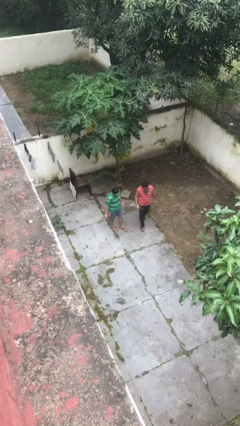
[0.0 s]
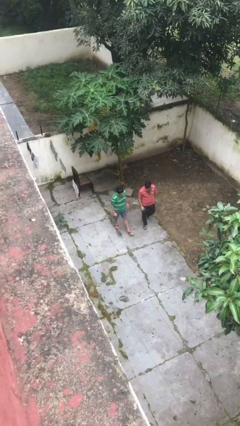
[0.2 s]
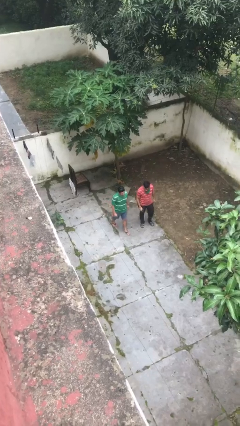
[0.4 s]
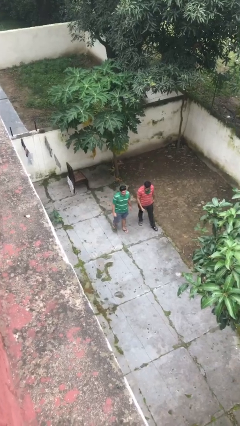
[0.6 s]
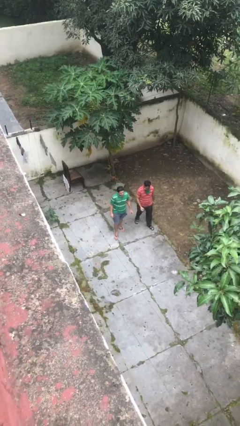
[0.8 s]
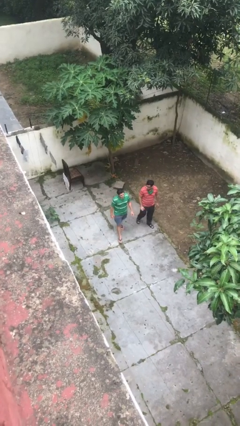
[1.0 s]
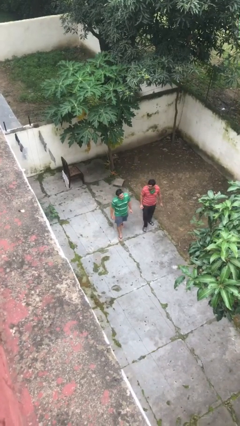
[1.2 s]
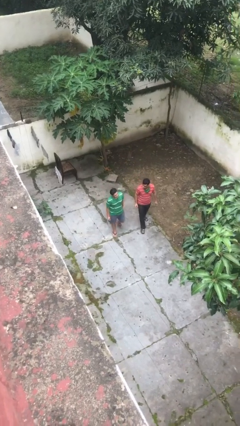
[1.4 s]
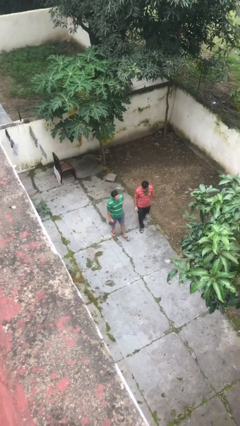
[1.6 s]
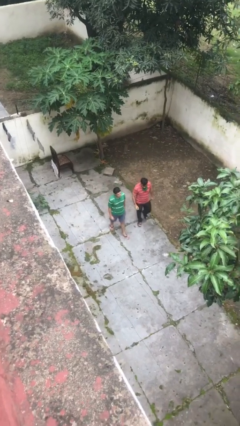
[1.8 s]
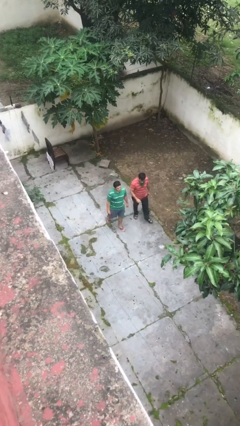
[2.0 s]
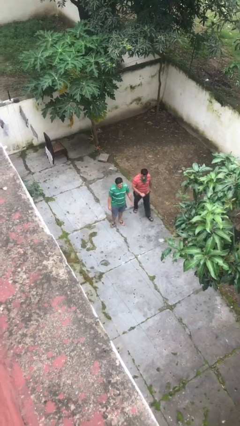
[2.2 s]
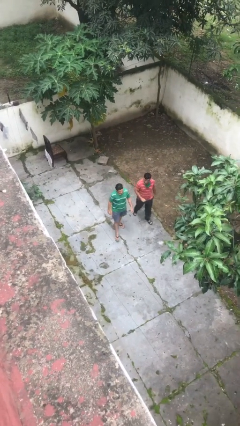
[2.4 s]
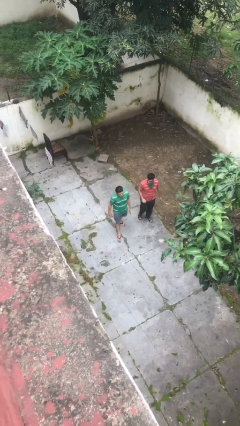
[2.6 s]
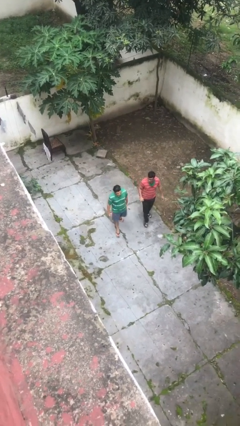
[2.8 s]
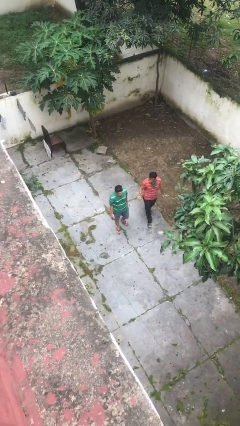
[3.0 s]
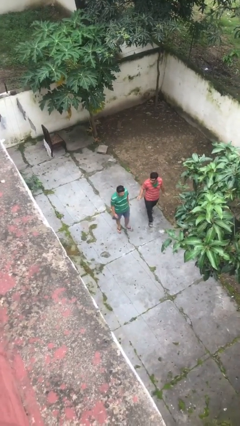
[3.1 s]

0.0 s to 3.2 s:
person talks to person

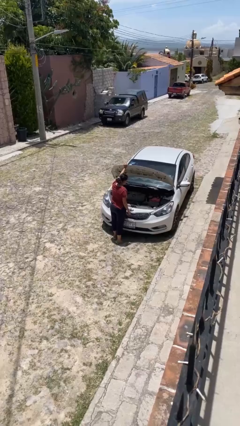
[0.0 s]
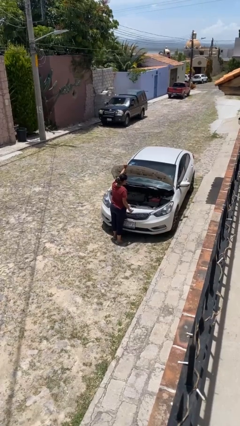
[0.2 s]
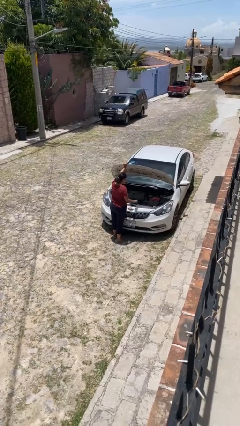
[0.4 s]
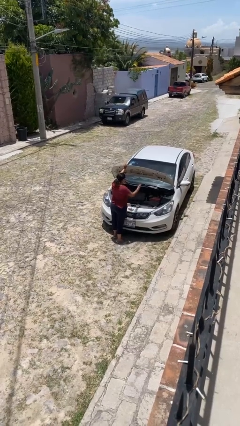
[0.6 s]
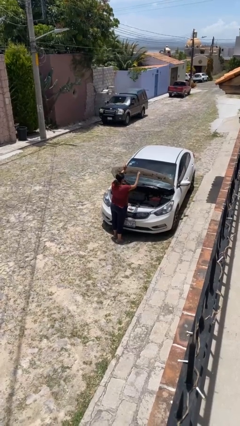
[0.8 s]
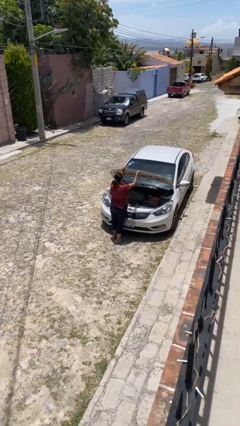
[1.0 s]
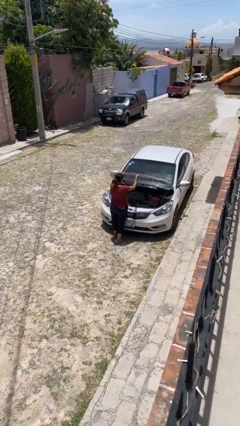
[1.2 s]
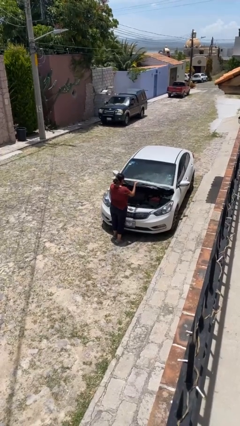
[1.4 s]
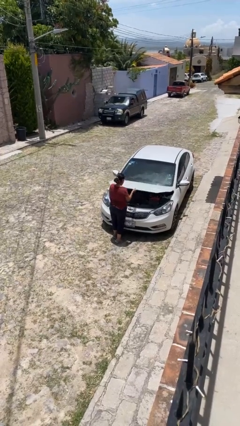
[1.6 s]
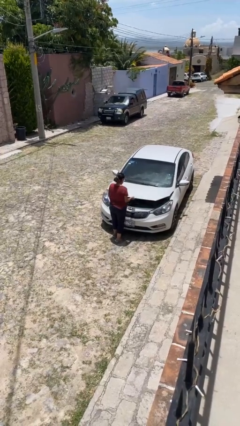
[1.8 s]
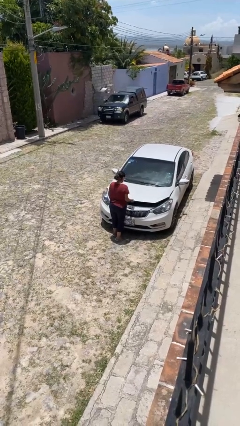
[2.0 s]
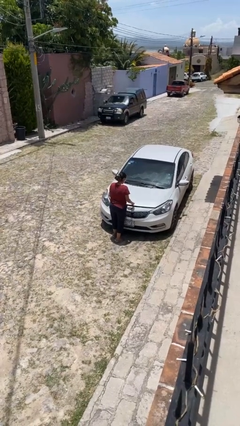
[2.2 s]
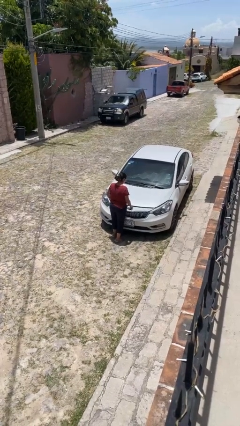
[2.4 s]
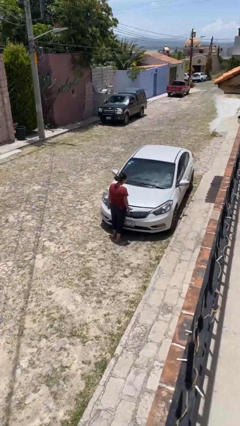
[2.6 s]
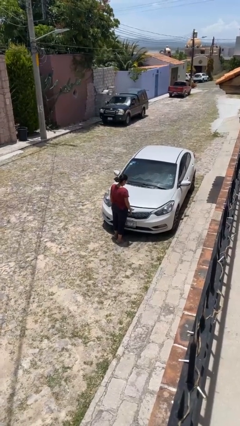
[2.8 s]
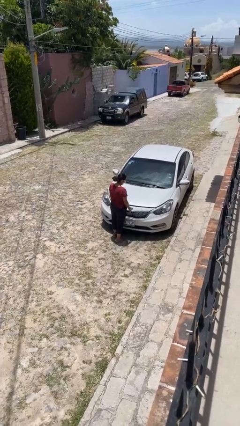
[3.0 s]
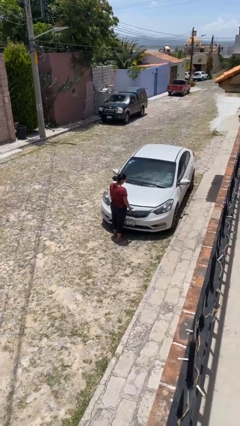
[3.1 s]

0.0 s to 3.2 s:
person closes car hood

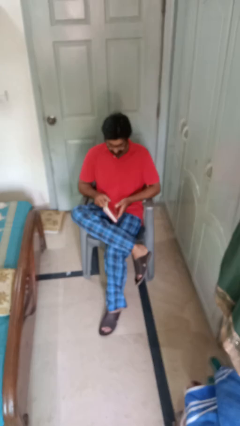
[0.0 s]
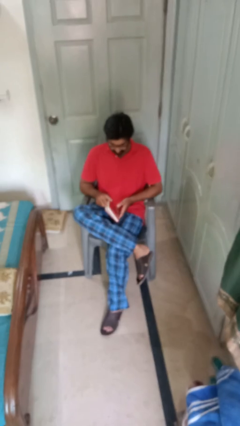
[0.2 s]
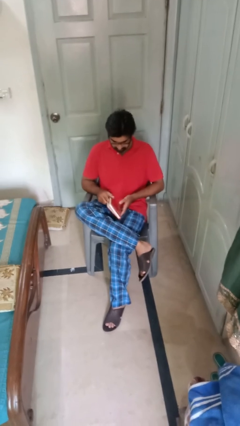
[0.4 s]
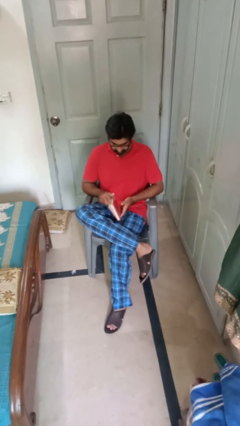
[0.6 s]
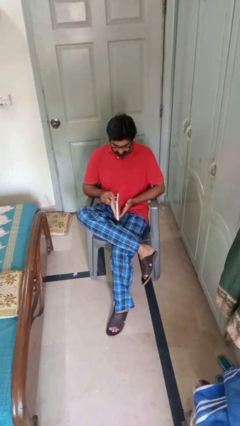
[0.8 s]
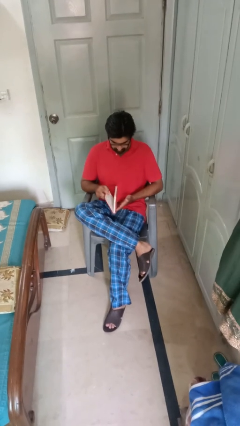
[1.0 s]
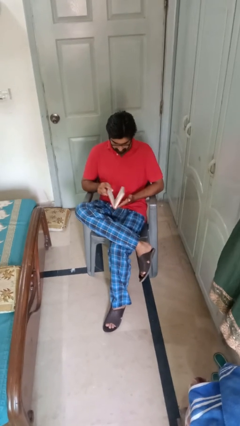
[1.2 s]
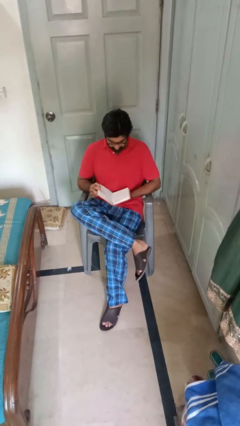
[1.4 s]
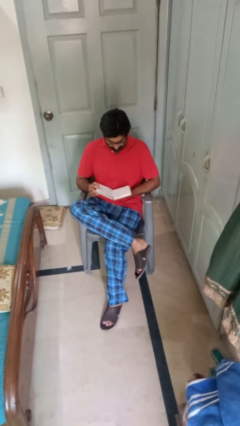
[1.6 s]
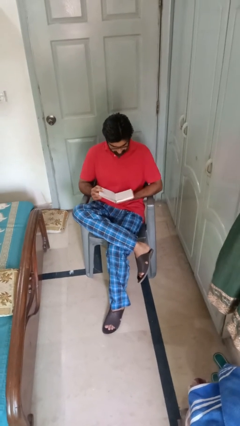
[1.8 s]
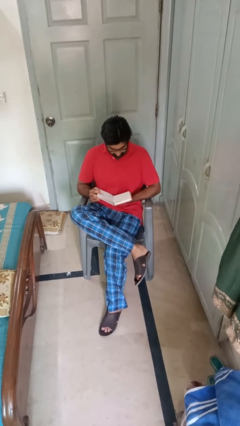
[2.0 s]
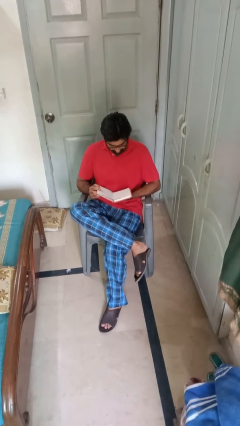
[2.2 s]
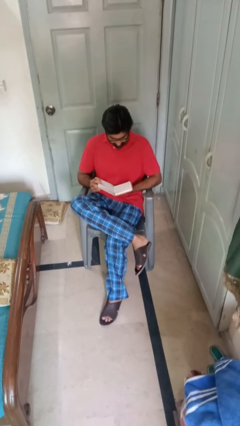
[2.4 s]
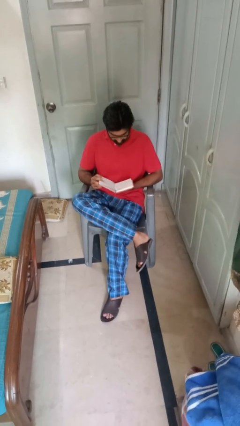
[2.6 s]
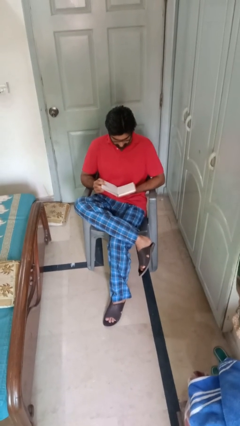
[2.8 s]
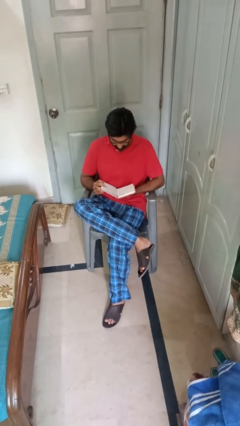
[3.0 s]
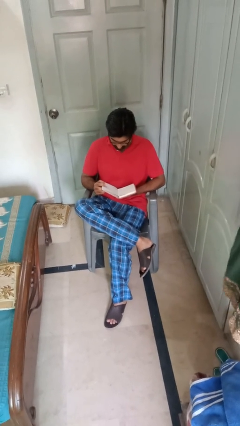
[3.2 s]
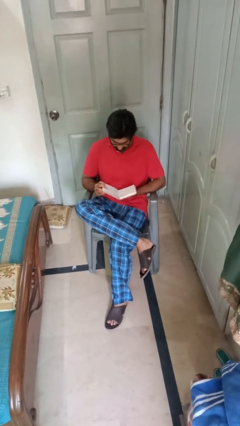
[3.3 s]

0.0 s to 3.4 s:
person reads book

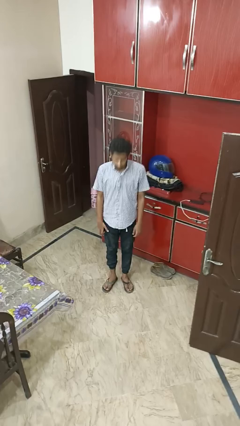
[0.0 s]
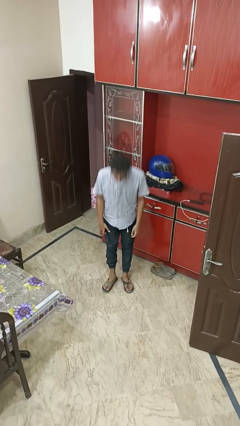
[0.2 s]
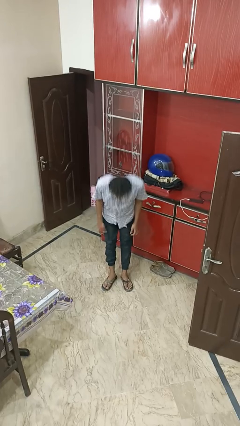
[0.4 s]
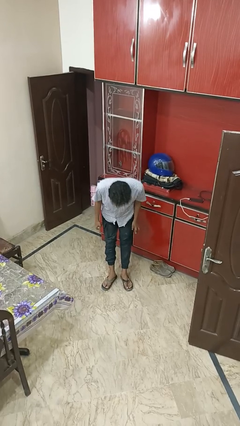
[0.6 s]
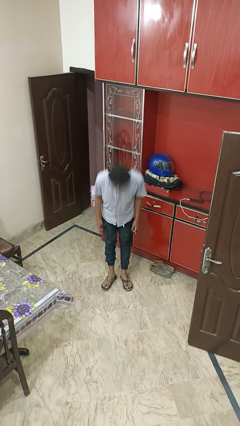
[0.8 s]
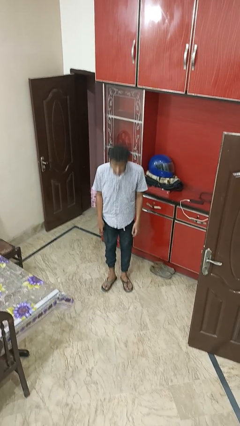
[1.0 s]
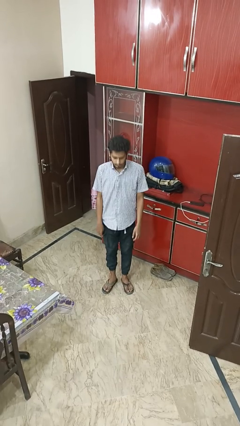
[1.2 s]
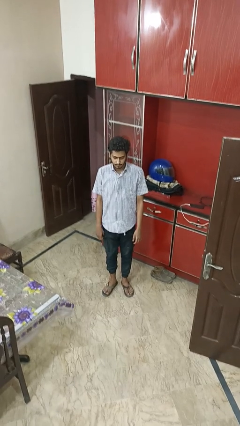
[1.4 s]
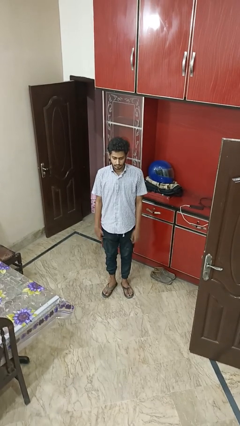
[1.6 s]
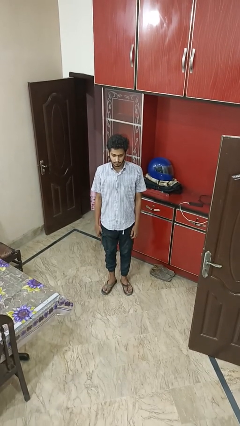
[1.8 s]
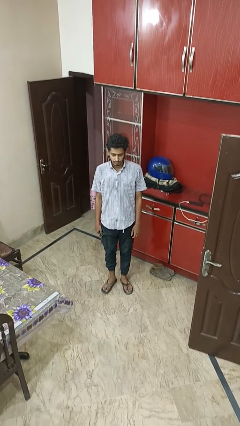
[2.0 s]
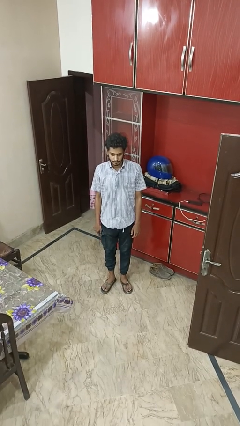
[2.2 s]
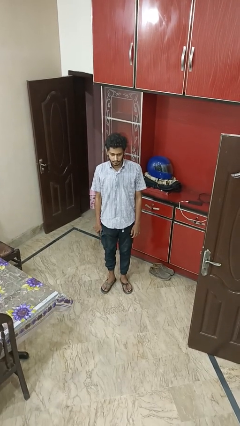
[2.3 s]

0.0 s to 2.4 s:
person bows

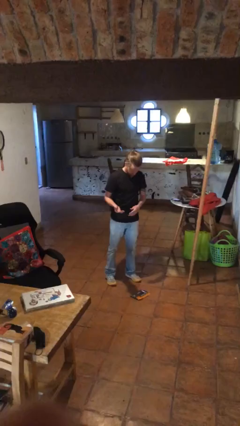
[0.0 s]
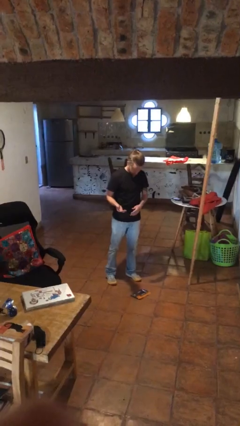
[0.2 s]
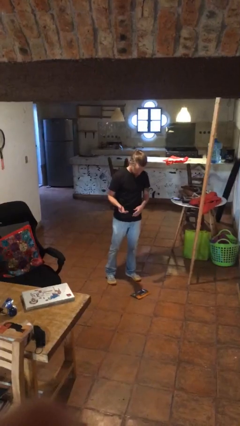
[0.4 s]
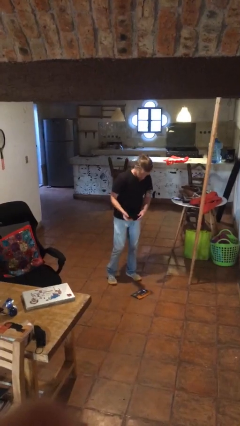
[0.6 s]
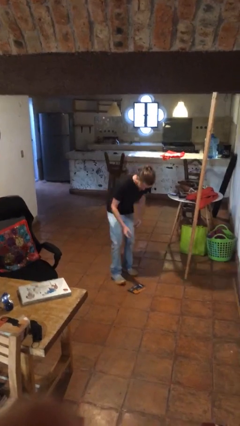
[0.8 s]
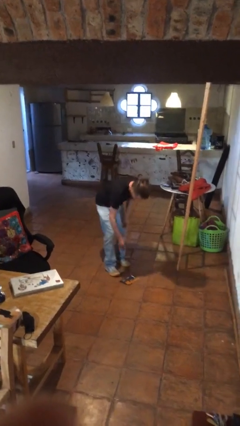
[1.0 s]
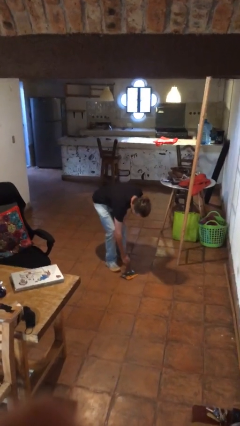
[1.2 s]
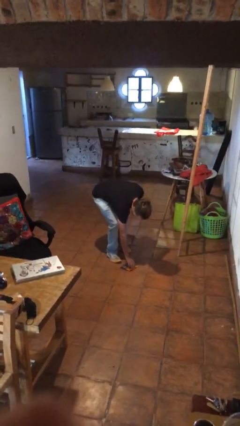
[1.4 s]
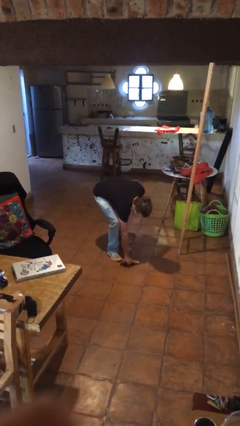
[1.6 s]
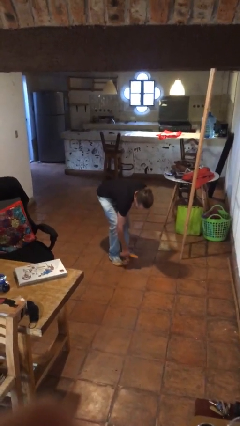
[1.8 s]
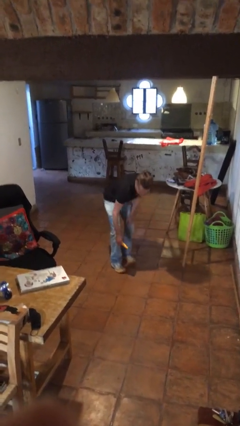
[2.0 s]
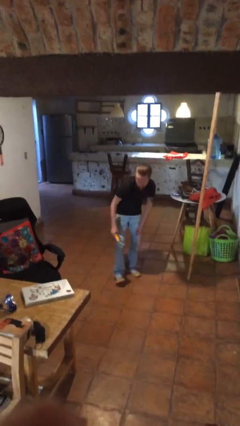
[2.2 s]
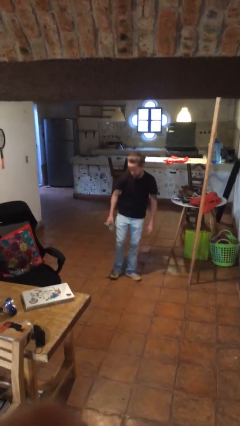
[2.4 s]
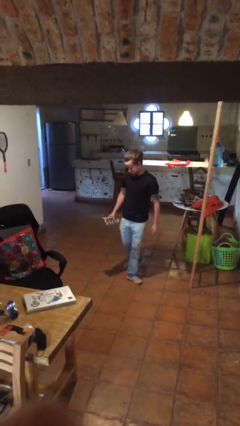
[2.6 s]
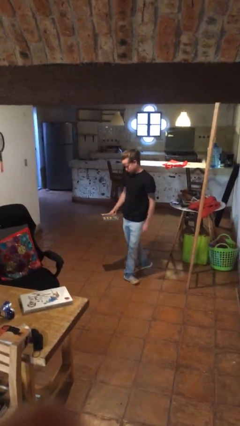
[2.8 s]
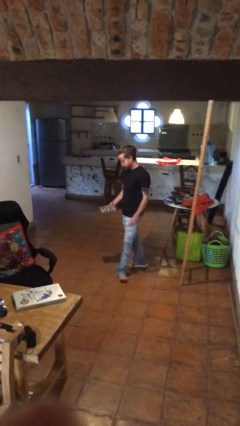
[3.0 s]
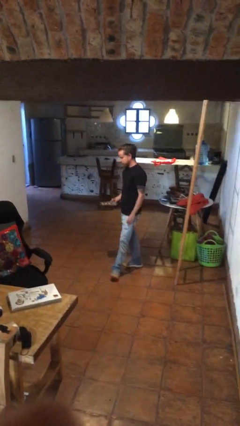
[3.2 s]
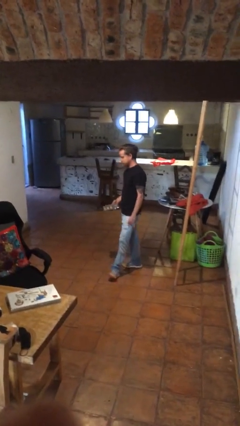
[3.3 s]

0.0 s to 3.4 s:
person picks up object from floor

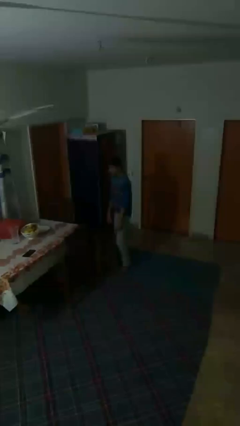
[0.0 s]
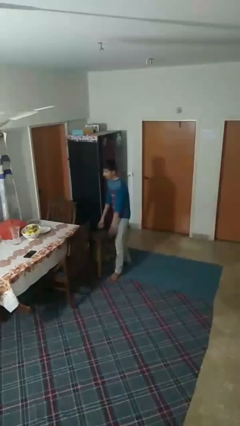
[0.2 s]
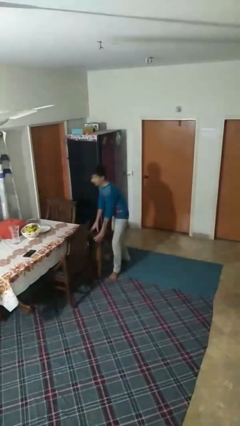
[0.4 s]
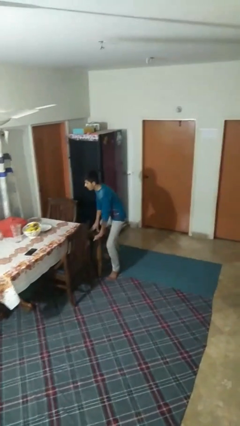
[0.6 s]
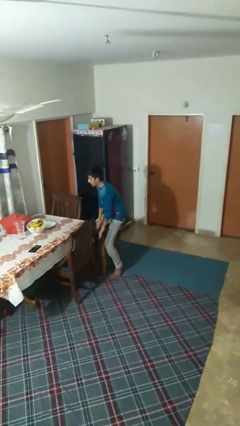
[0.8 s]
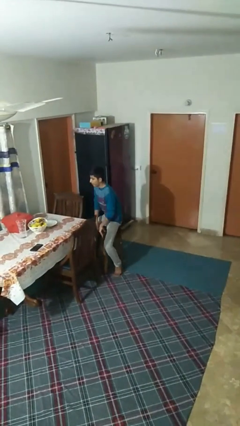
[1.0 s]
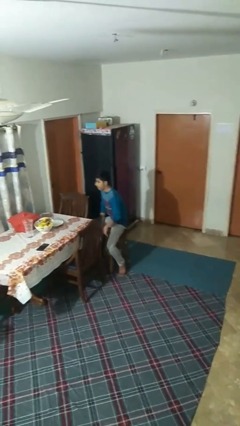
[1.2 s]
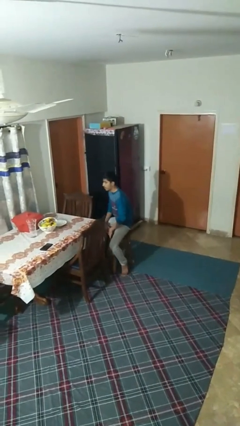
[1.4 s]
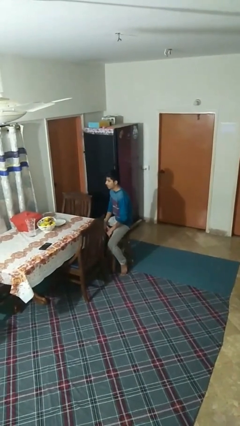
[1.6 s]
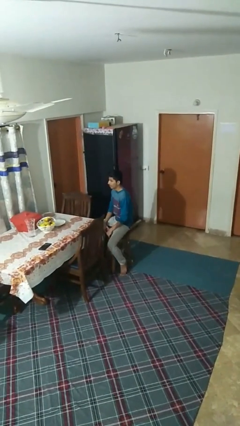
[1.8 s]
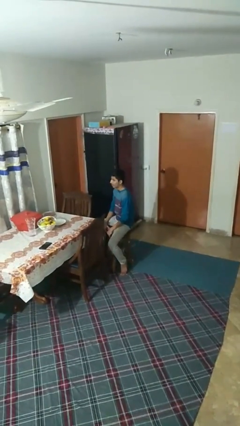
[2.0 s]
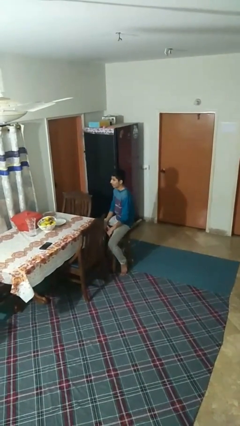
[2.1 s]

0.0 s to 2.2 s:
person sits down
